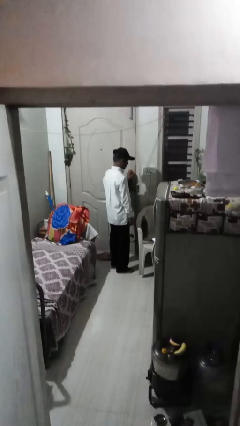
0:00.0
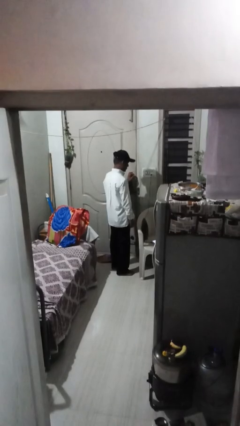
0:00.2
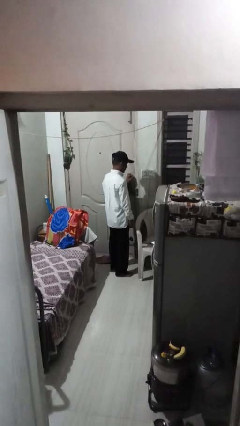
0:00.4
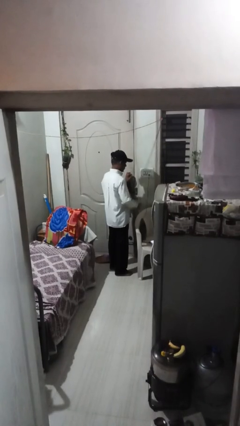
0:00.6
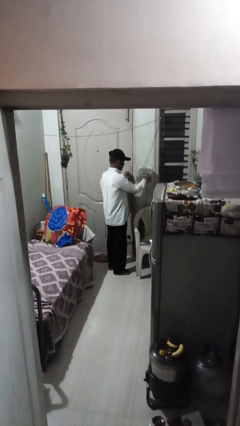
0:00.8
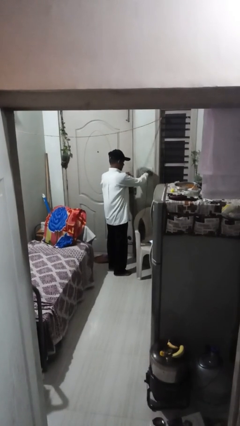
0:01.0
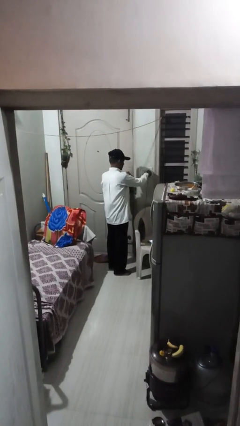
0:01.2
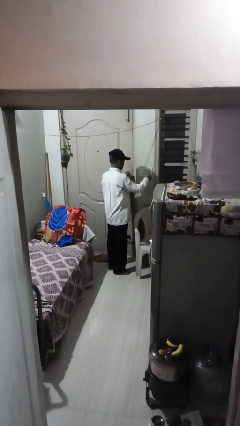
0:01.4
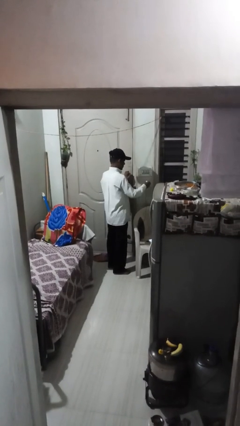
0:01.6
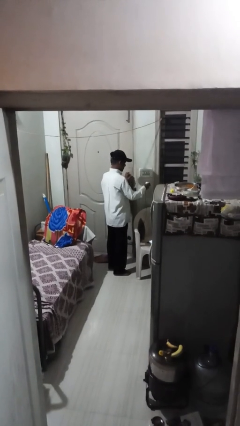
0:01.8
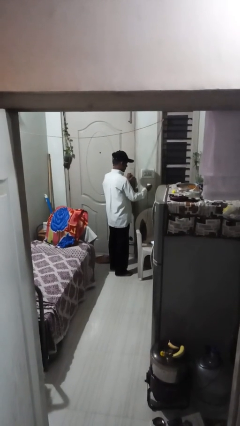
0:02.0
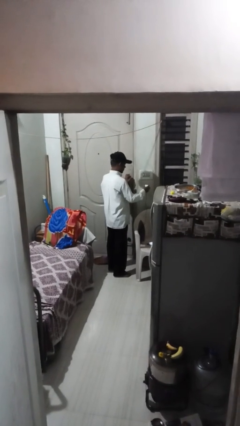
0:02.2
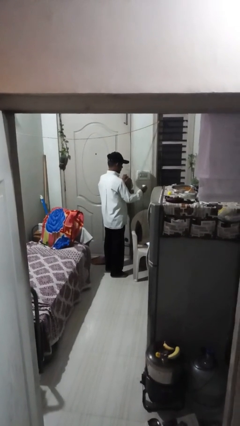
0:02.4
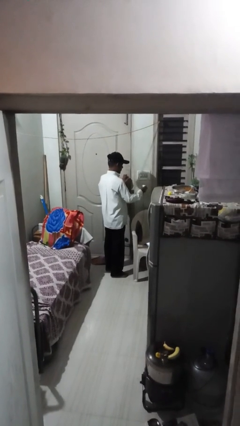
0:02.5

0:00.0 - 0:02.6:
person unplugs from electrical socket

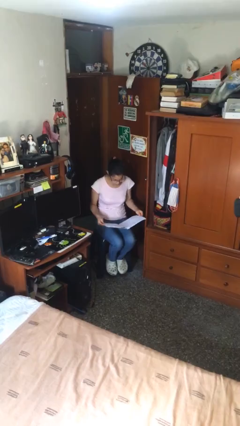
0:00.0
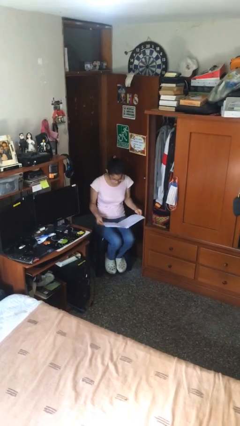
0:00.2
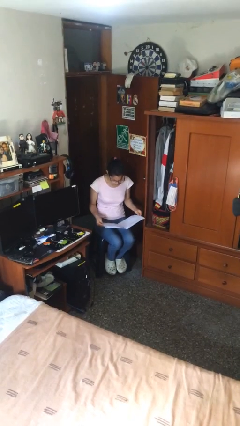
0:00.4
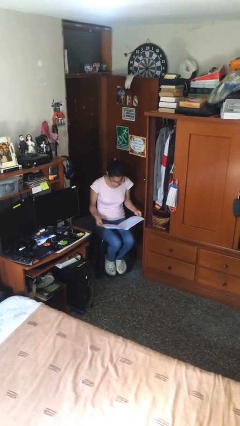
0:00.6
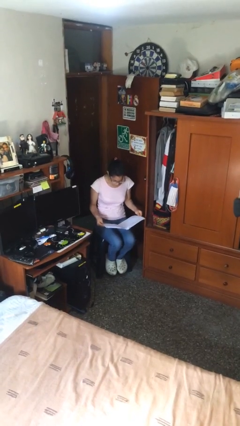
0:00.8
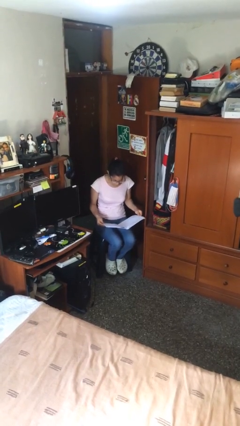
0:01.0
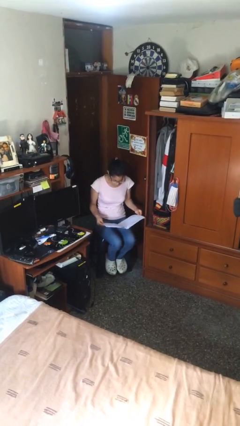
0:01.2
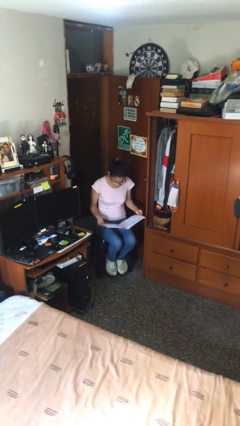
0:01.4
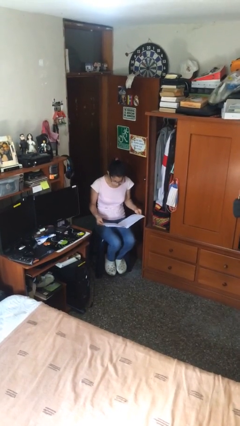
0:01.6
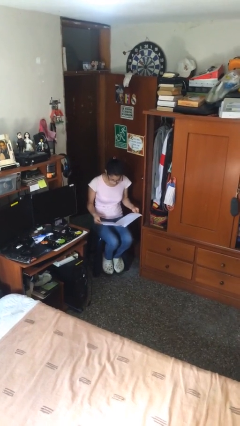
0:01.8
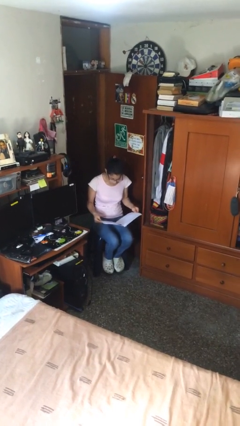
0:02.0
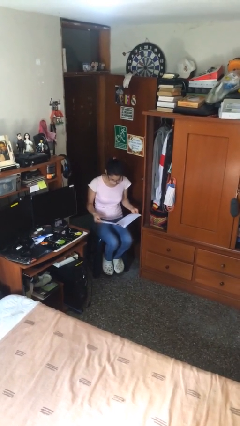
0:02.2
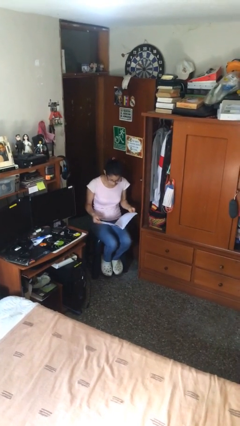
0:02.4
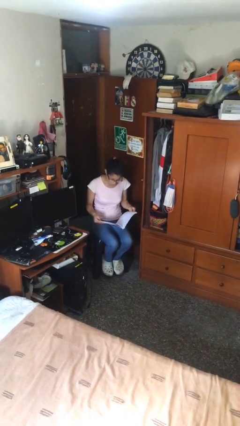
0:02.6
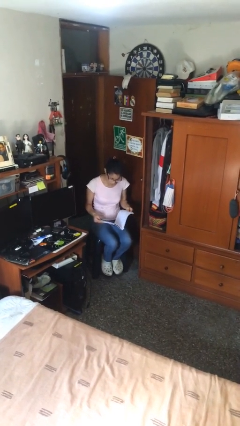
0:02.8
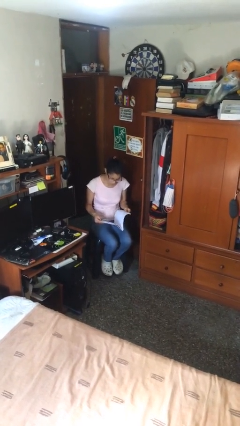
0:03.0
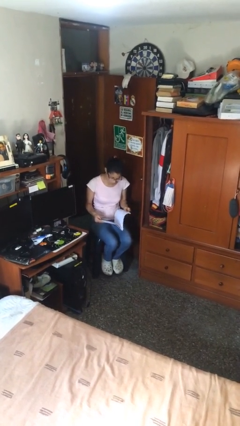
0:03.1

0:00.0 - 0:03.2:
person reads document

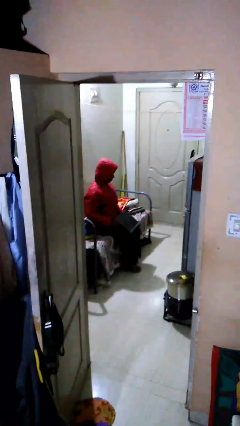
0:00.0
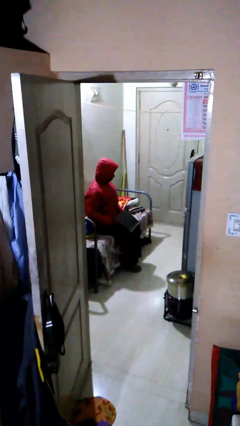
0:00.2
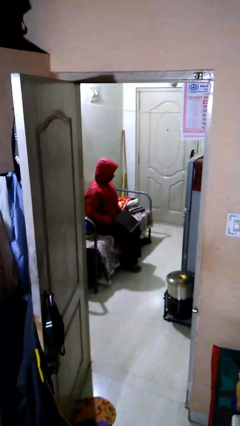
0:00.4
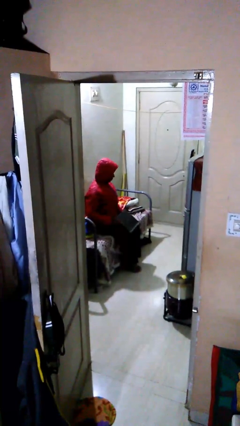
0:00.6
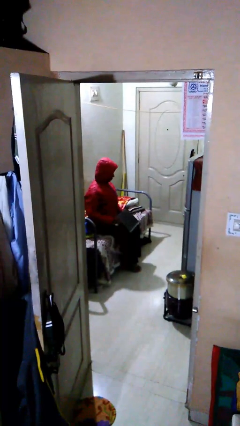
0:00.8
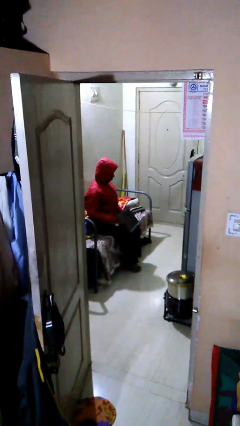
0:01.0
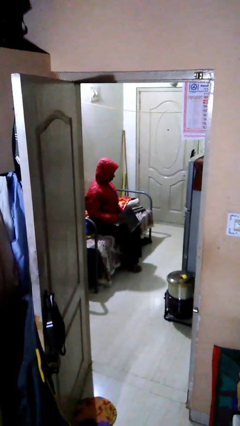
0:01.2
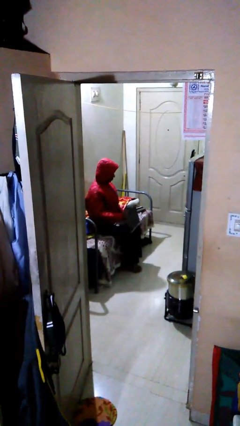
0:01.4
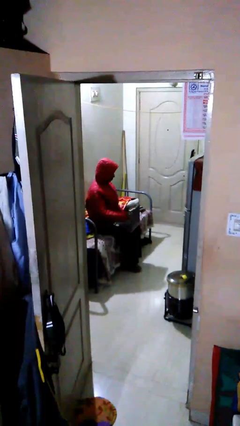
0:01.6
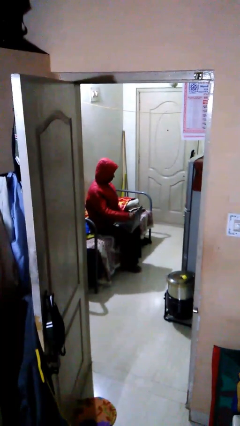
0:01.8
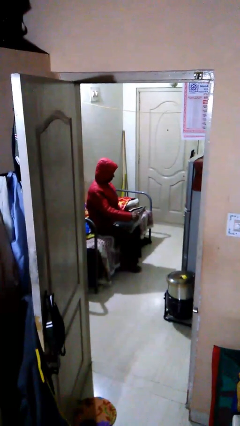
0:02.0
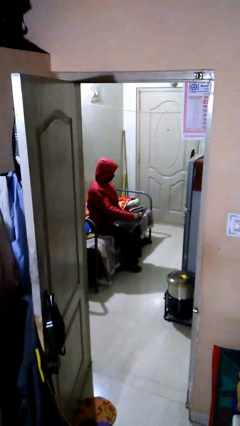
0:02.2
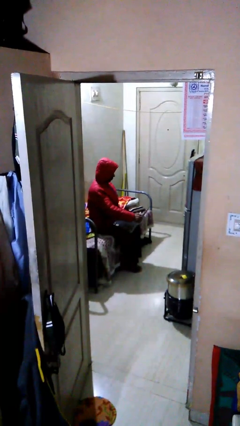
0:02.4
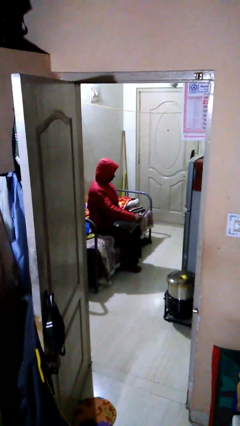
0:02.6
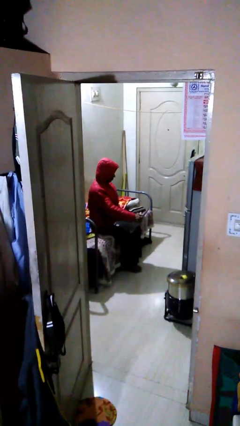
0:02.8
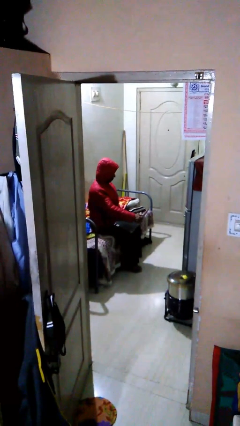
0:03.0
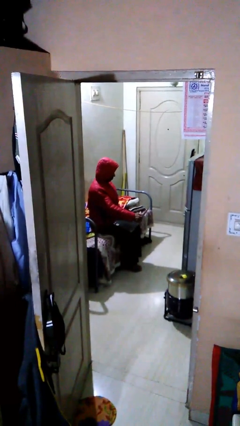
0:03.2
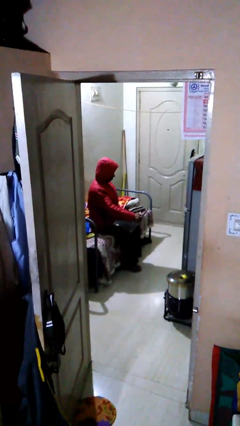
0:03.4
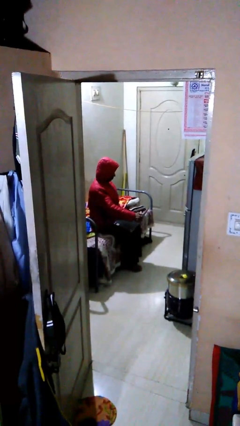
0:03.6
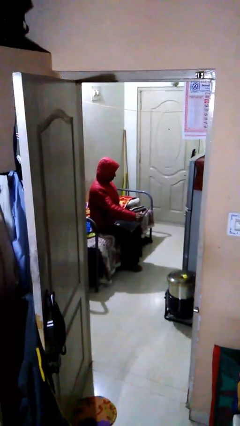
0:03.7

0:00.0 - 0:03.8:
person interacts with laptop

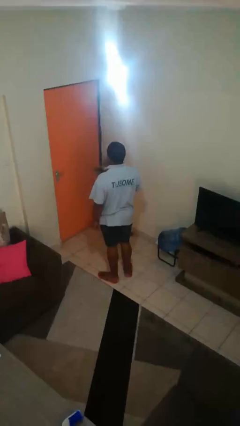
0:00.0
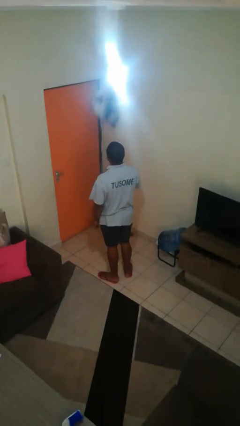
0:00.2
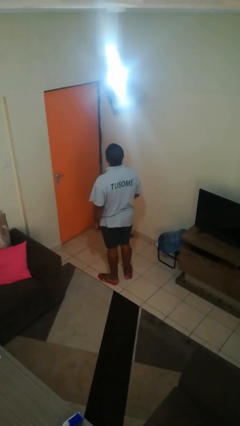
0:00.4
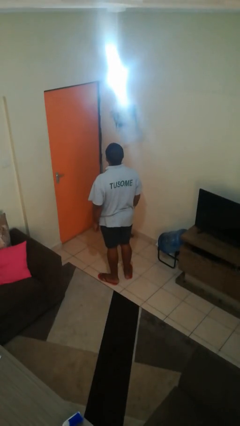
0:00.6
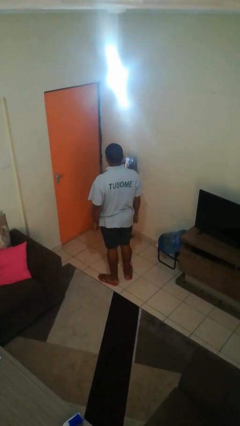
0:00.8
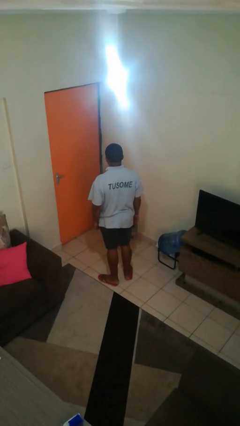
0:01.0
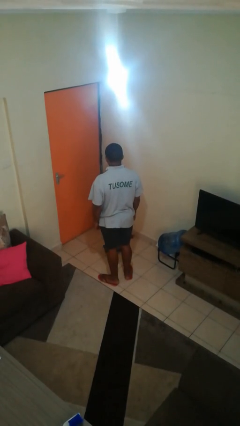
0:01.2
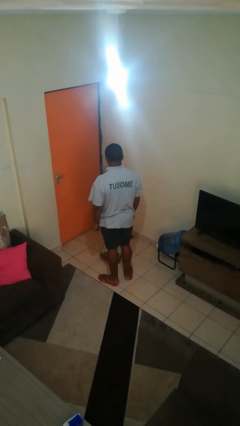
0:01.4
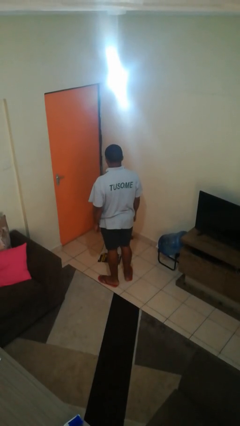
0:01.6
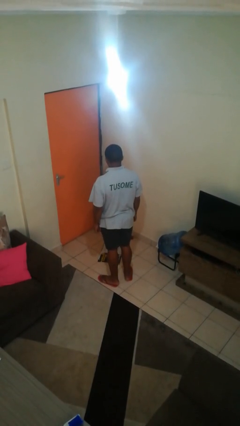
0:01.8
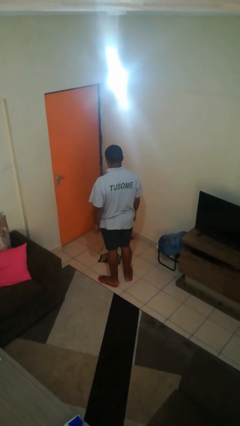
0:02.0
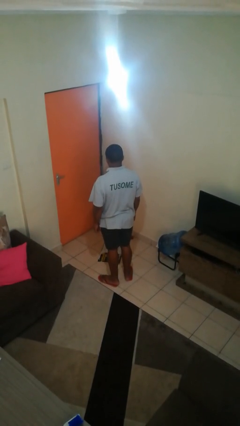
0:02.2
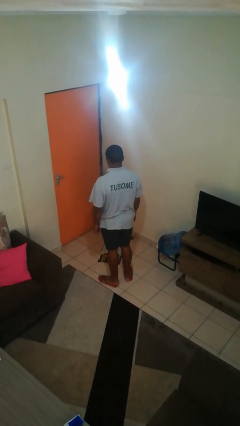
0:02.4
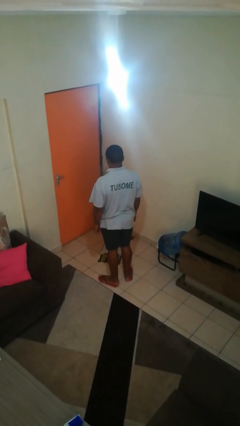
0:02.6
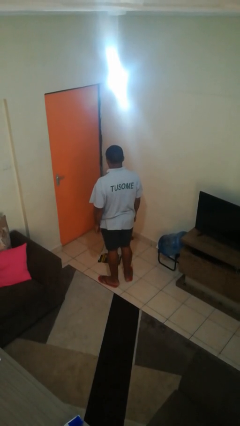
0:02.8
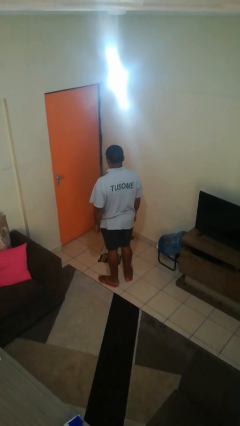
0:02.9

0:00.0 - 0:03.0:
person throws object into air

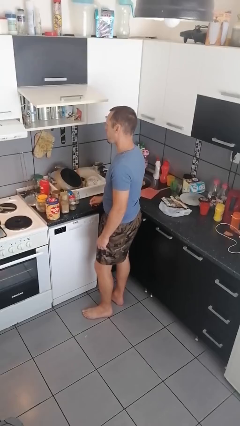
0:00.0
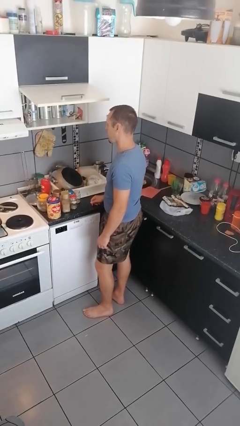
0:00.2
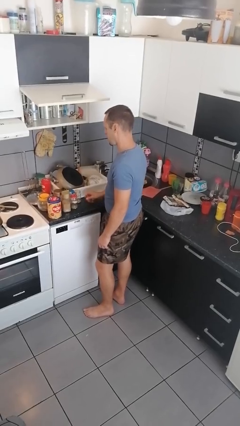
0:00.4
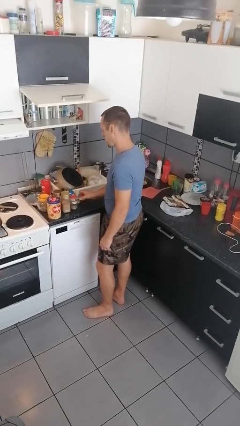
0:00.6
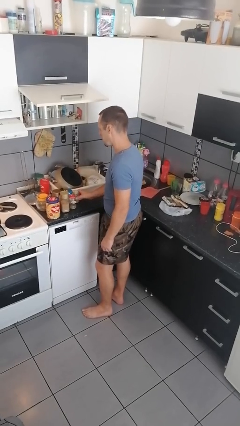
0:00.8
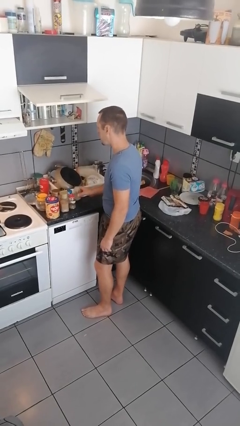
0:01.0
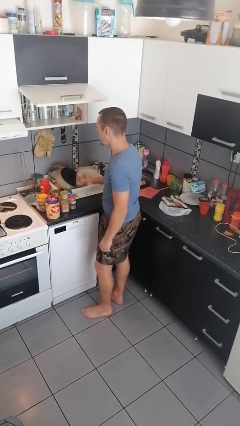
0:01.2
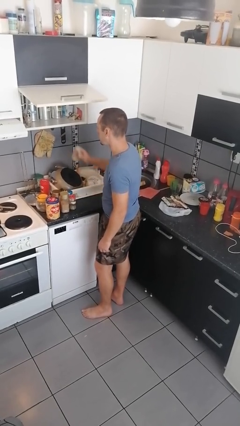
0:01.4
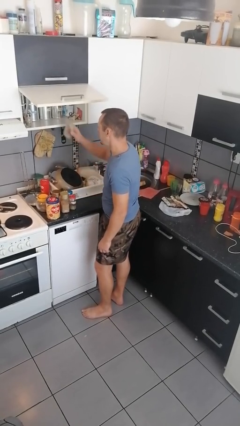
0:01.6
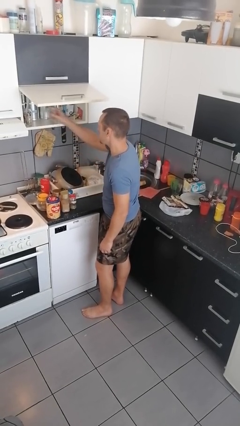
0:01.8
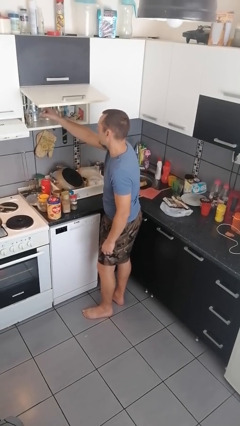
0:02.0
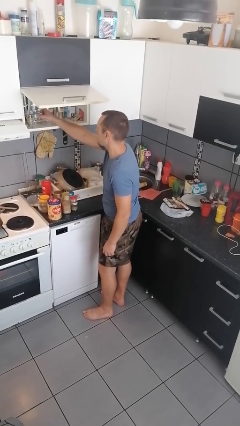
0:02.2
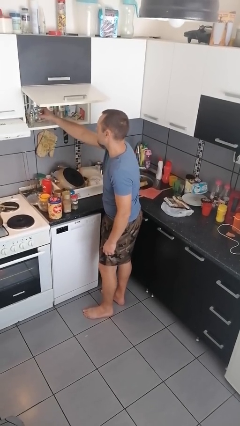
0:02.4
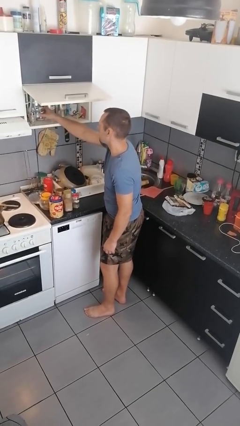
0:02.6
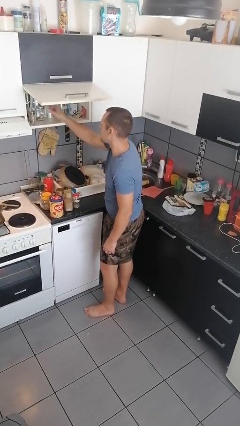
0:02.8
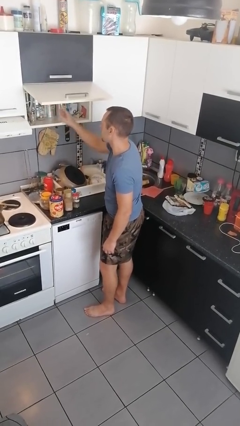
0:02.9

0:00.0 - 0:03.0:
person loads groceries into cabinet

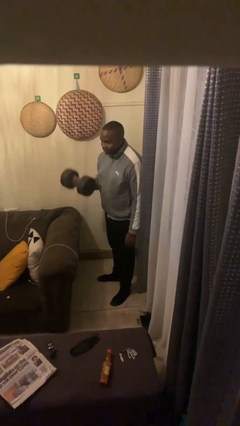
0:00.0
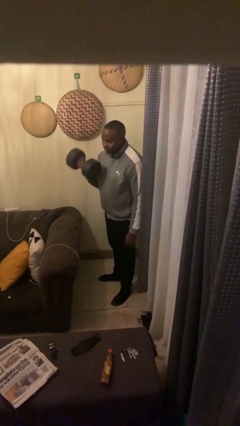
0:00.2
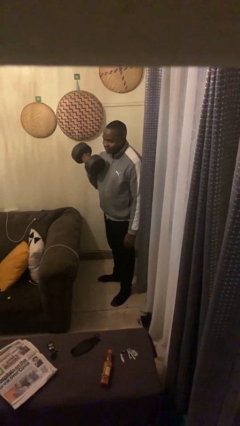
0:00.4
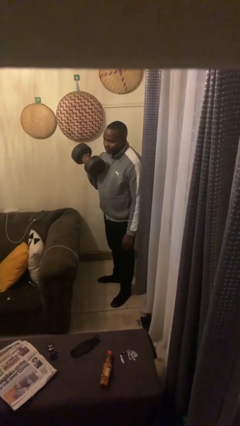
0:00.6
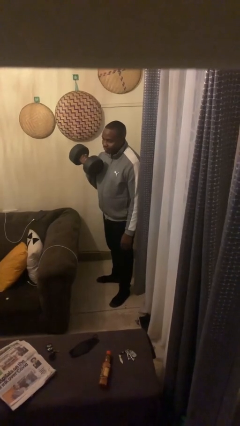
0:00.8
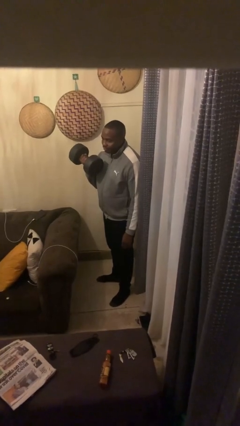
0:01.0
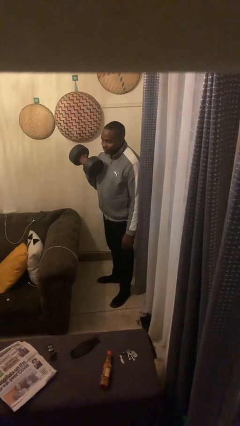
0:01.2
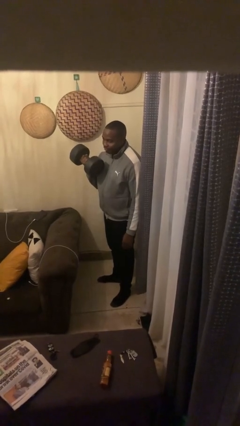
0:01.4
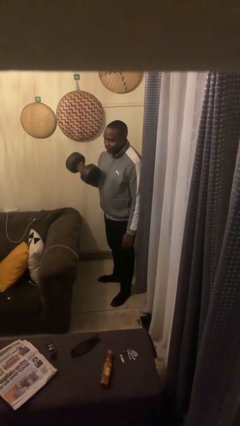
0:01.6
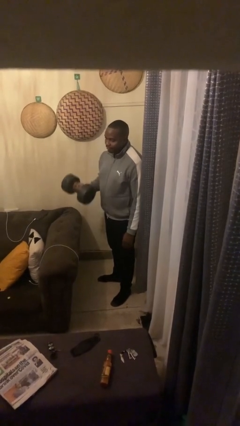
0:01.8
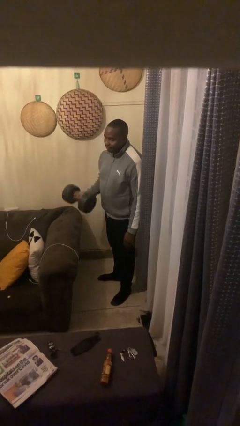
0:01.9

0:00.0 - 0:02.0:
person lifts dumbbells
